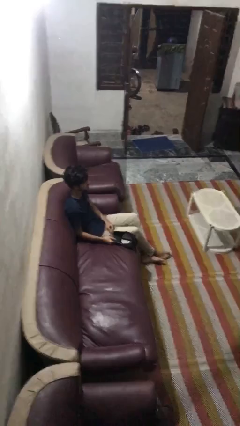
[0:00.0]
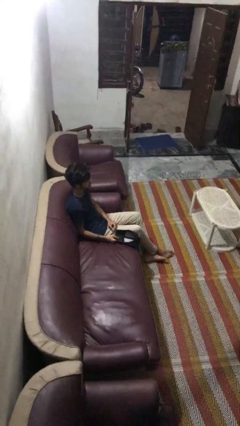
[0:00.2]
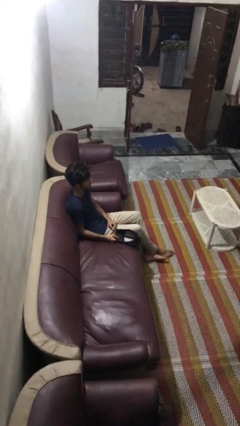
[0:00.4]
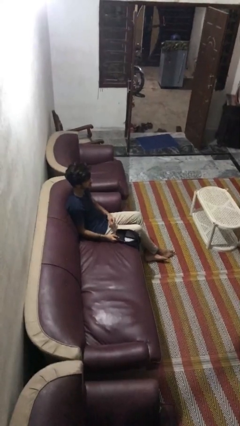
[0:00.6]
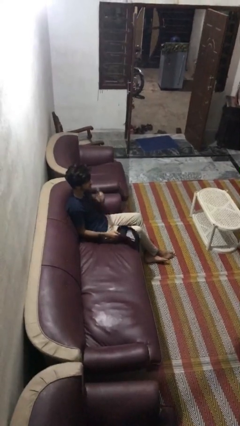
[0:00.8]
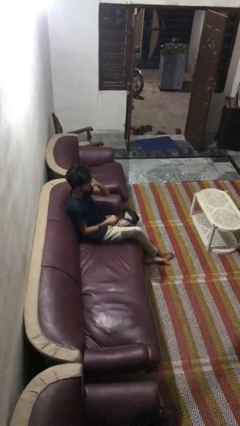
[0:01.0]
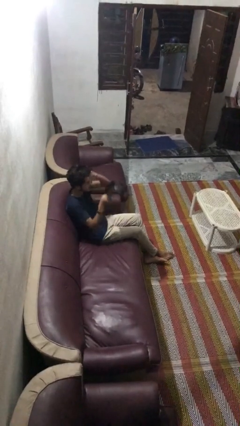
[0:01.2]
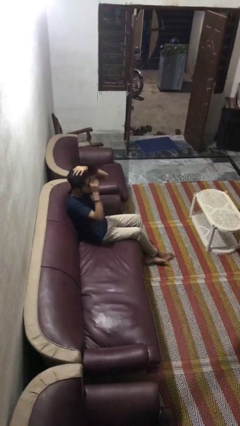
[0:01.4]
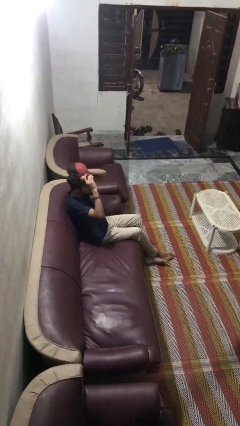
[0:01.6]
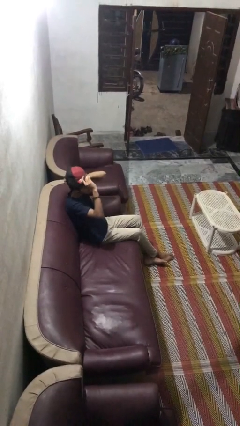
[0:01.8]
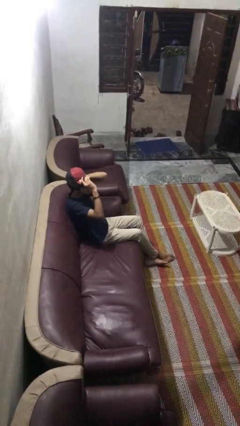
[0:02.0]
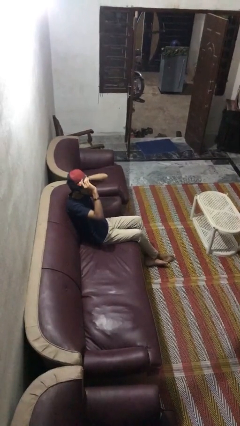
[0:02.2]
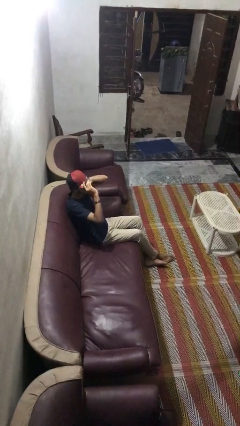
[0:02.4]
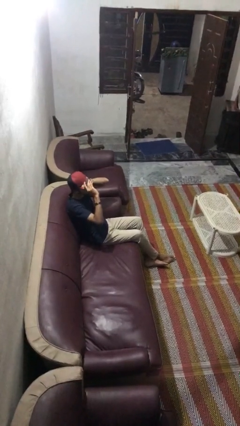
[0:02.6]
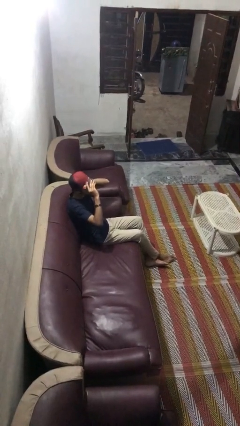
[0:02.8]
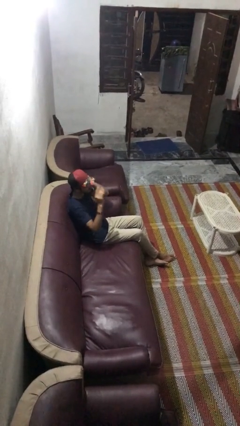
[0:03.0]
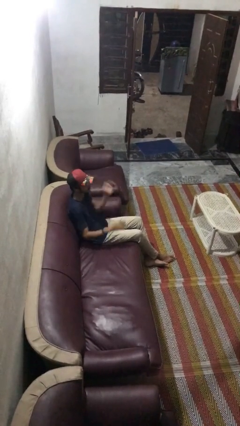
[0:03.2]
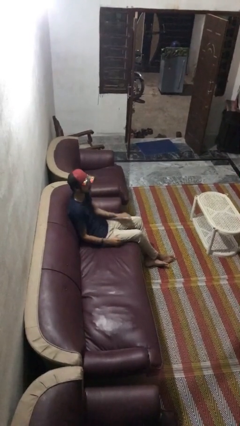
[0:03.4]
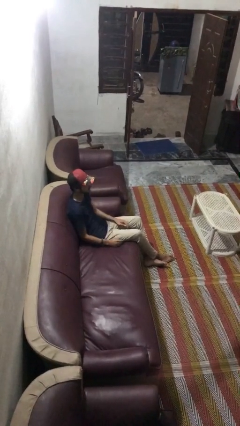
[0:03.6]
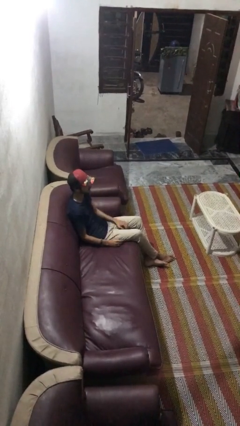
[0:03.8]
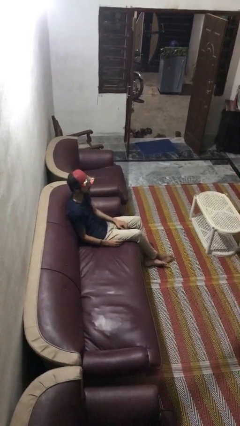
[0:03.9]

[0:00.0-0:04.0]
person puts on hat

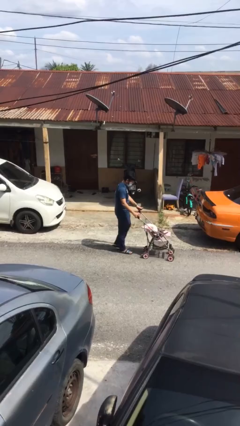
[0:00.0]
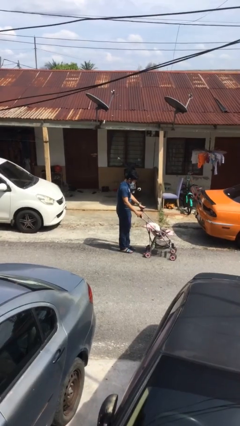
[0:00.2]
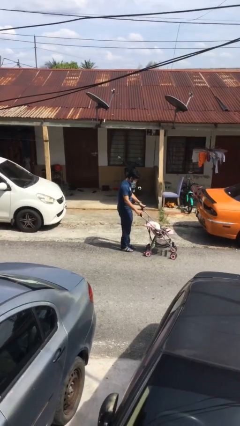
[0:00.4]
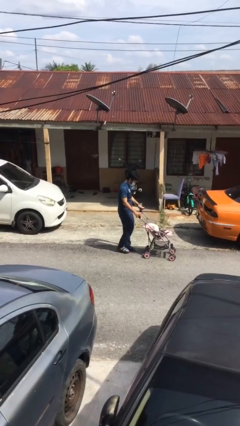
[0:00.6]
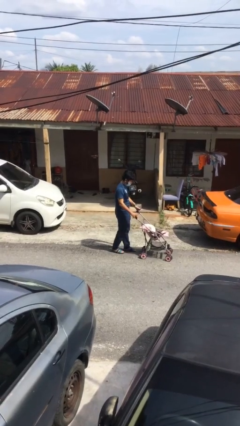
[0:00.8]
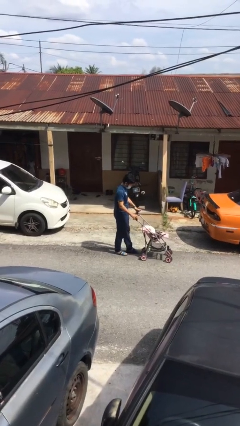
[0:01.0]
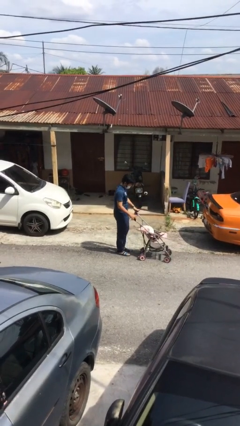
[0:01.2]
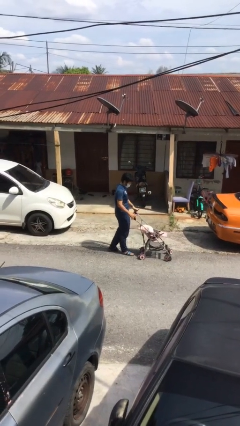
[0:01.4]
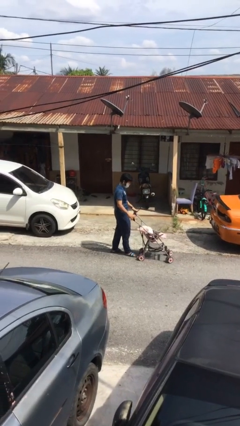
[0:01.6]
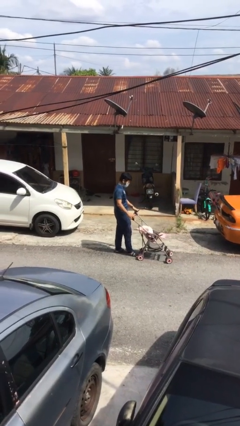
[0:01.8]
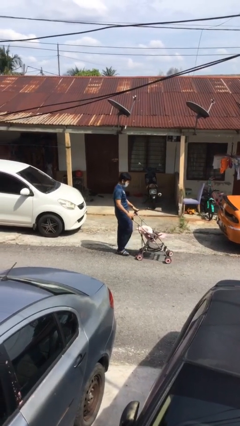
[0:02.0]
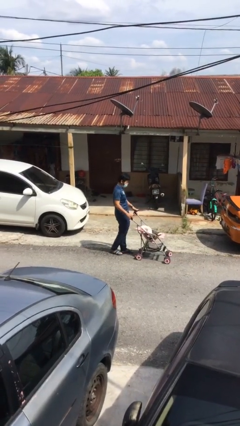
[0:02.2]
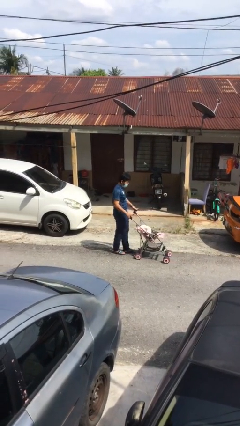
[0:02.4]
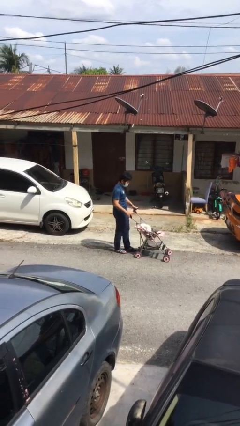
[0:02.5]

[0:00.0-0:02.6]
person pulls wheeled cart

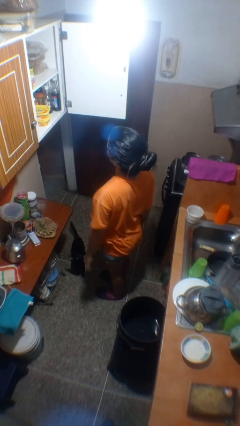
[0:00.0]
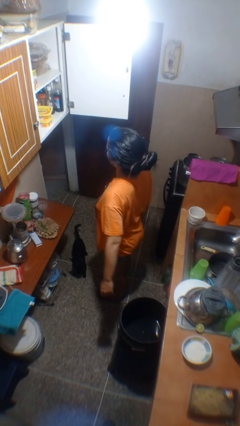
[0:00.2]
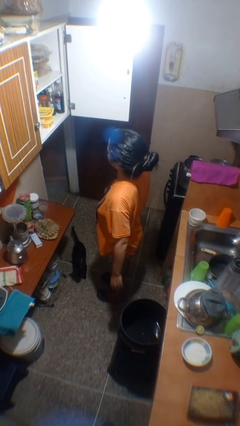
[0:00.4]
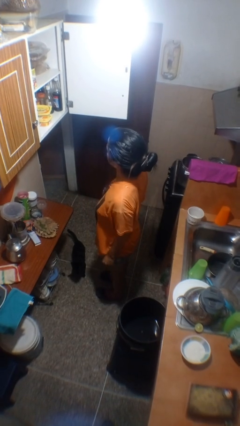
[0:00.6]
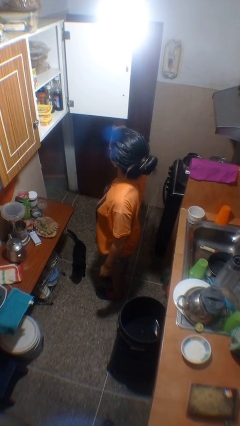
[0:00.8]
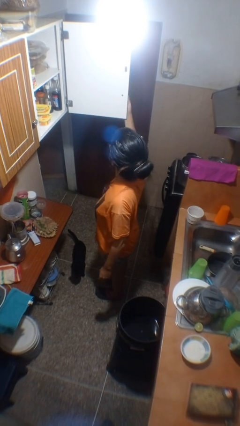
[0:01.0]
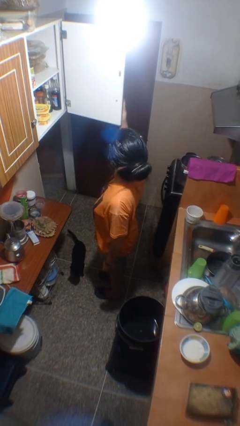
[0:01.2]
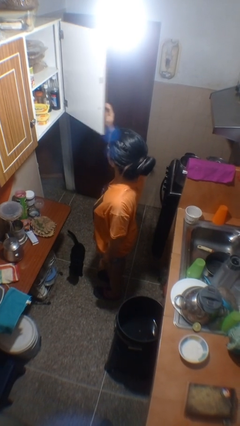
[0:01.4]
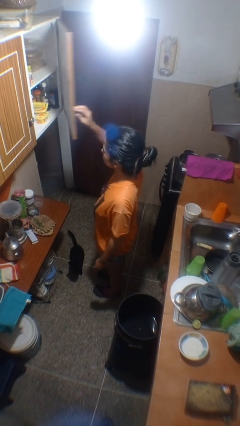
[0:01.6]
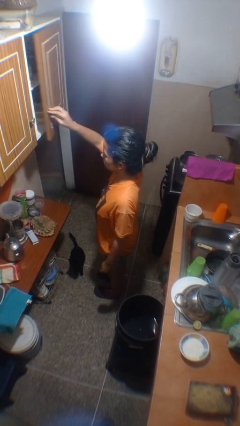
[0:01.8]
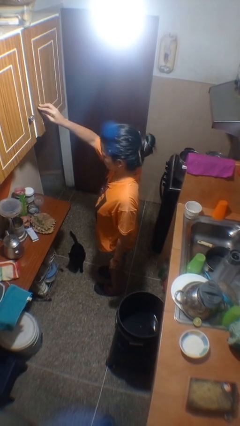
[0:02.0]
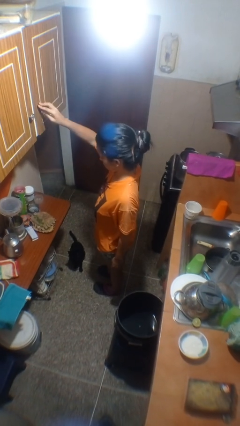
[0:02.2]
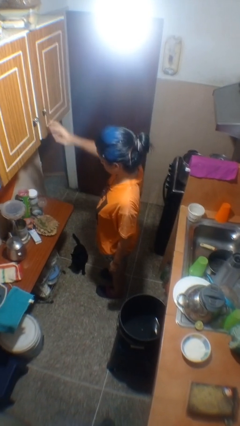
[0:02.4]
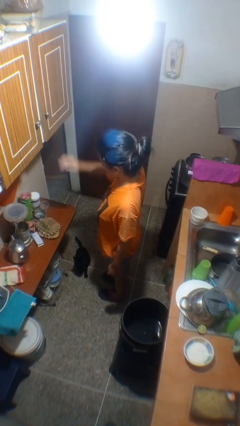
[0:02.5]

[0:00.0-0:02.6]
person closes cabinet

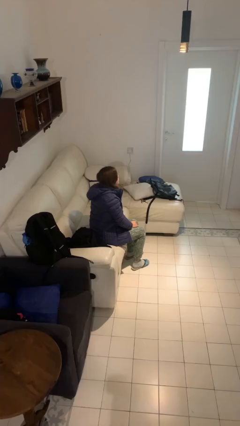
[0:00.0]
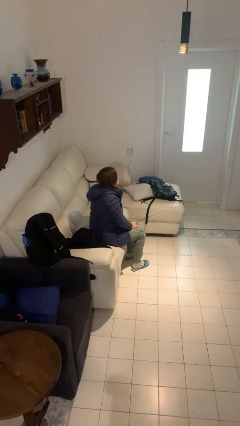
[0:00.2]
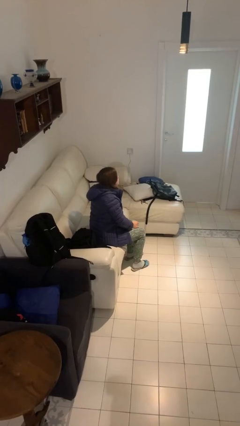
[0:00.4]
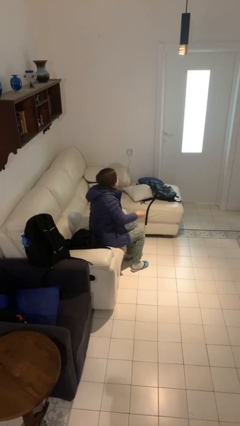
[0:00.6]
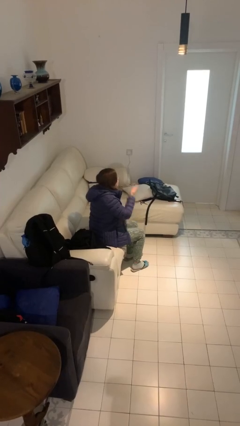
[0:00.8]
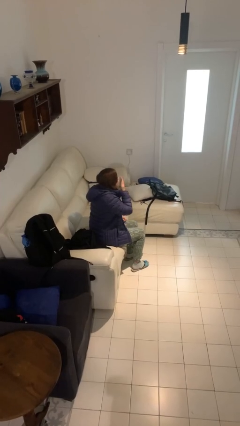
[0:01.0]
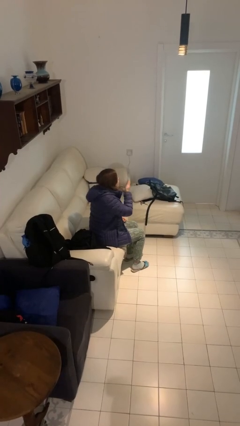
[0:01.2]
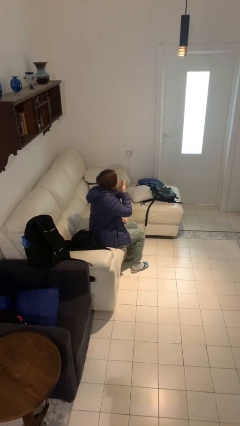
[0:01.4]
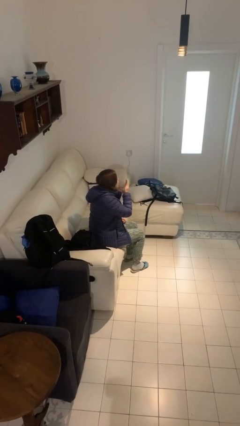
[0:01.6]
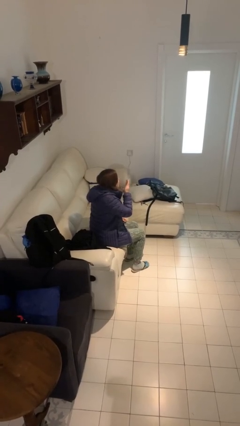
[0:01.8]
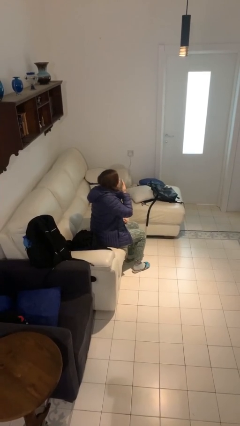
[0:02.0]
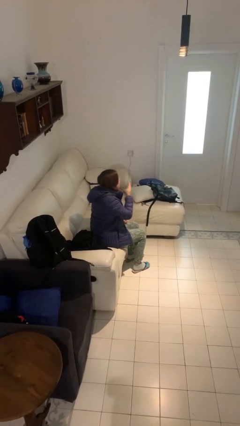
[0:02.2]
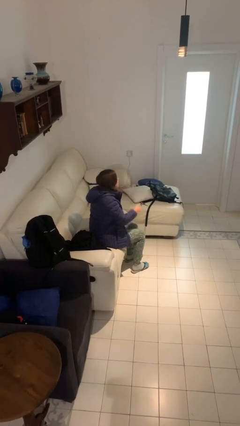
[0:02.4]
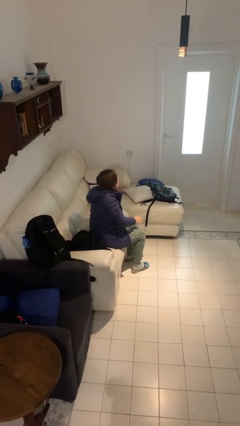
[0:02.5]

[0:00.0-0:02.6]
person yawns

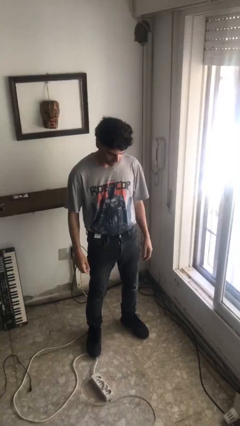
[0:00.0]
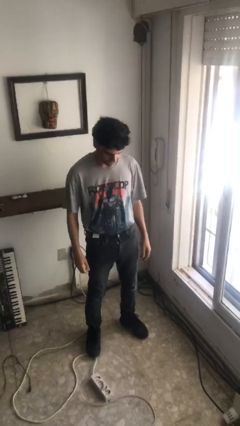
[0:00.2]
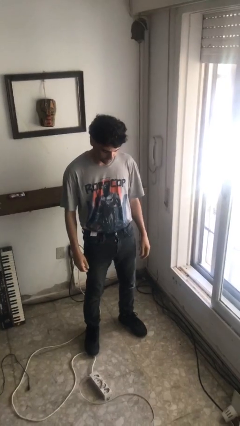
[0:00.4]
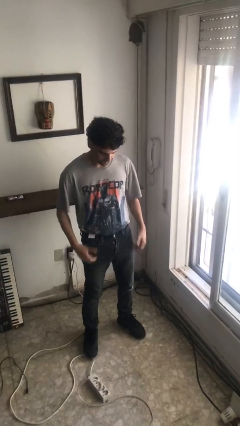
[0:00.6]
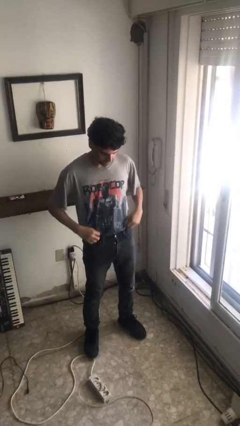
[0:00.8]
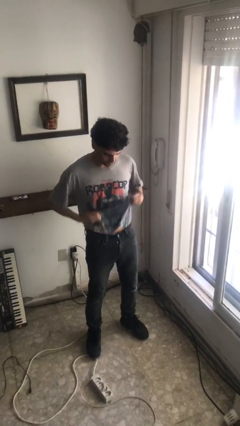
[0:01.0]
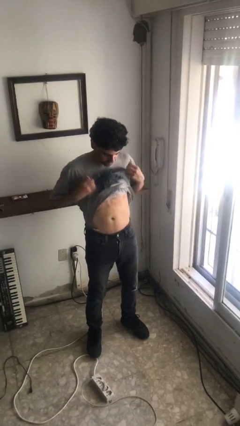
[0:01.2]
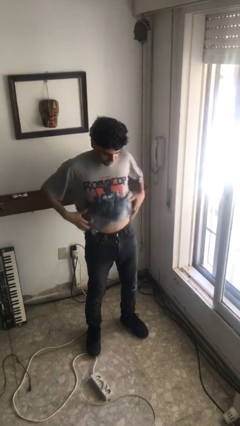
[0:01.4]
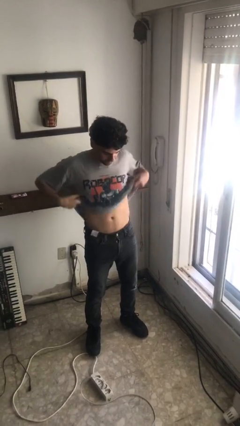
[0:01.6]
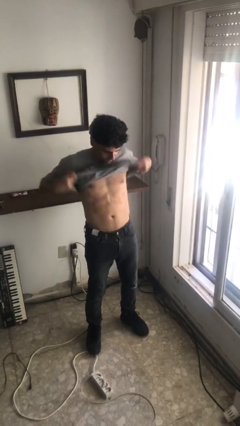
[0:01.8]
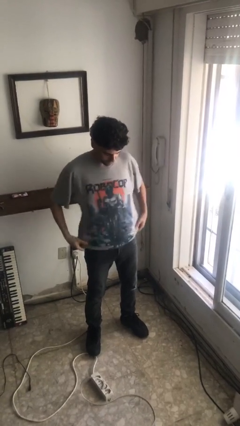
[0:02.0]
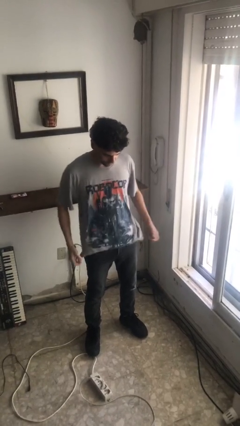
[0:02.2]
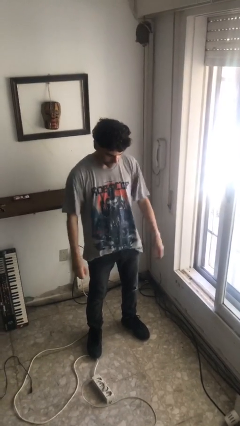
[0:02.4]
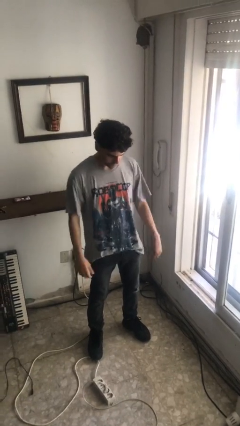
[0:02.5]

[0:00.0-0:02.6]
person untucks shirt

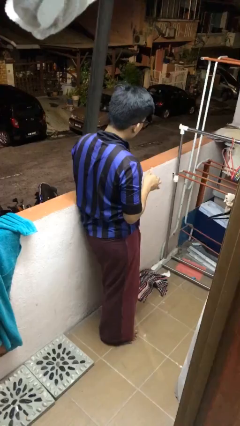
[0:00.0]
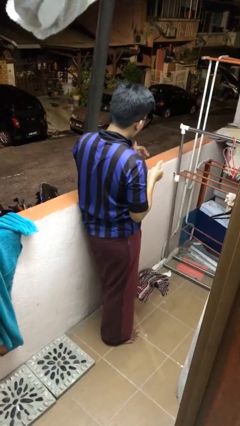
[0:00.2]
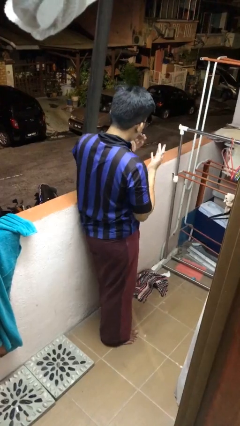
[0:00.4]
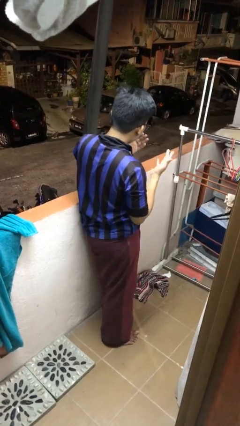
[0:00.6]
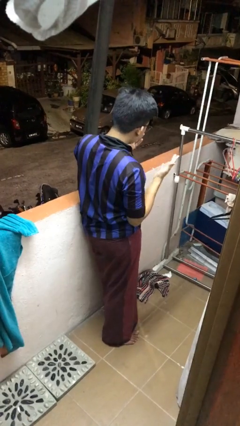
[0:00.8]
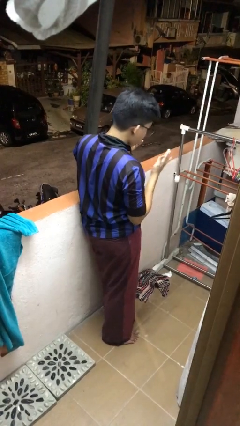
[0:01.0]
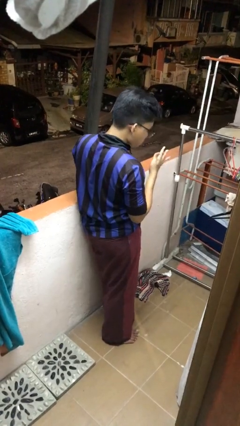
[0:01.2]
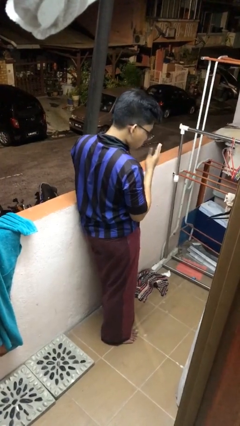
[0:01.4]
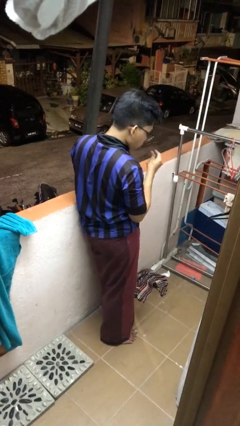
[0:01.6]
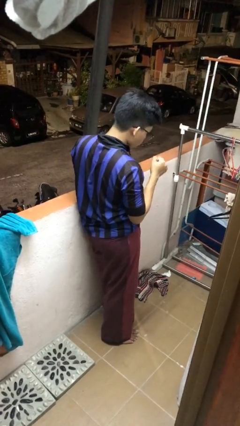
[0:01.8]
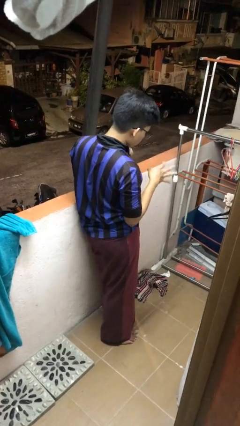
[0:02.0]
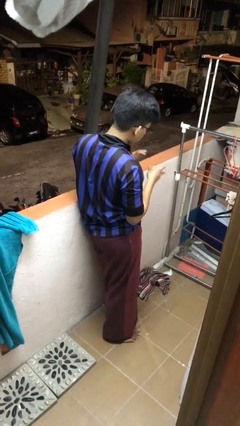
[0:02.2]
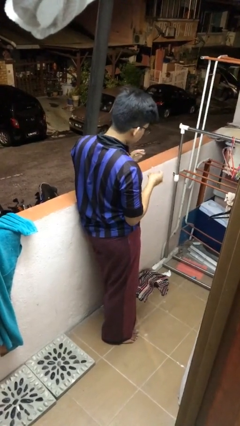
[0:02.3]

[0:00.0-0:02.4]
person blows into hands

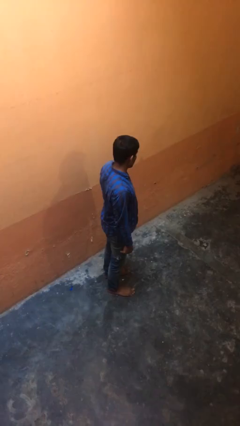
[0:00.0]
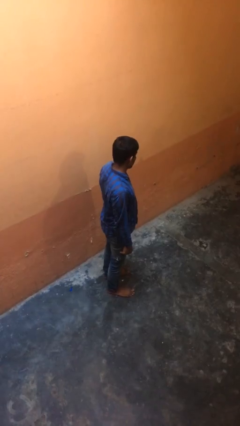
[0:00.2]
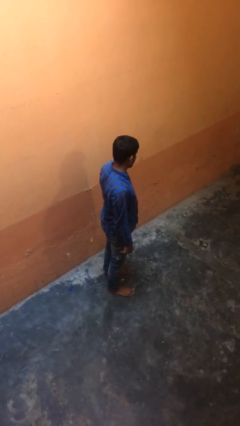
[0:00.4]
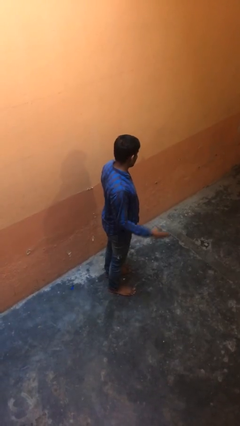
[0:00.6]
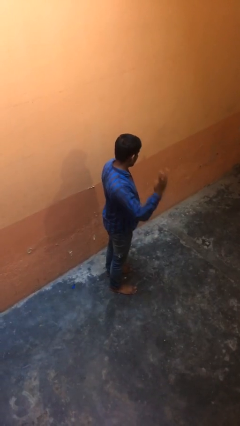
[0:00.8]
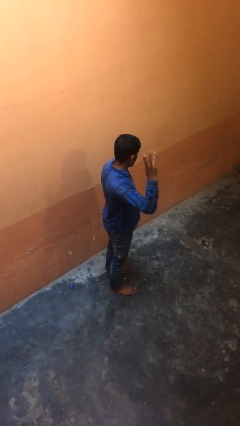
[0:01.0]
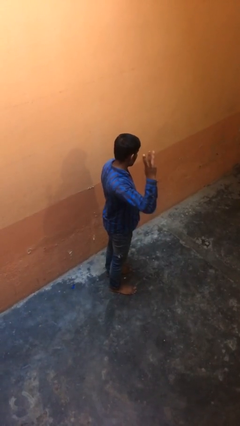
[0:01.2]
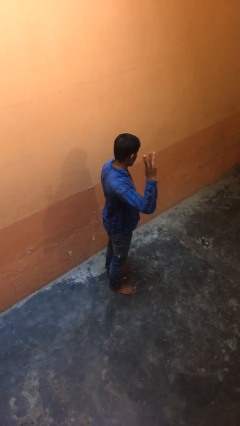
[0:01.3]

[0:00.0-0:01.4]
person gestures number three
